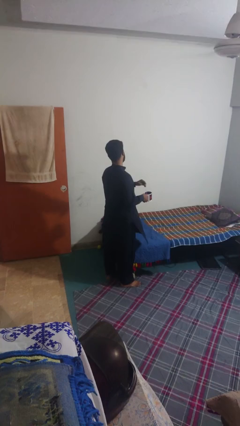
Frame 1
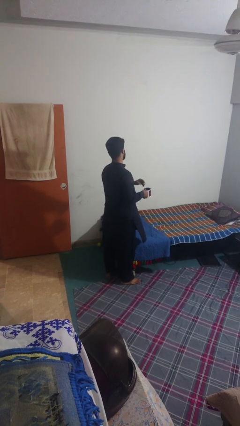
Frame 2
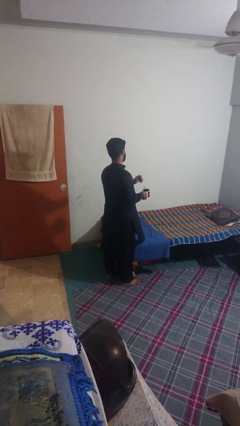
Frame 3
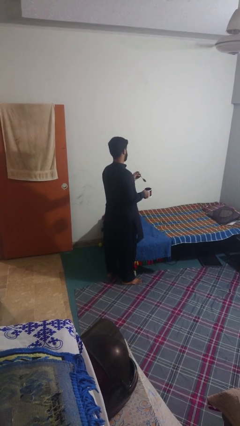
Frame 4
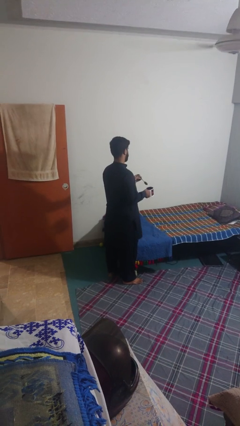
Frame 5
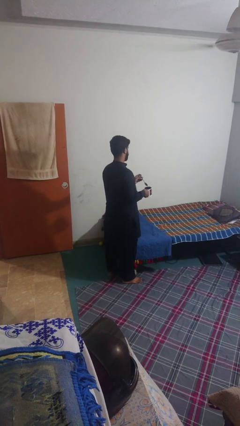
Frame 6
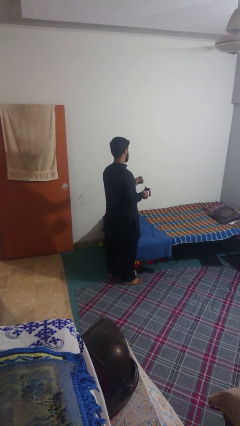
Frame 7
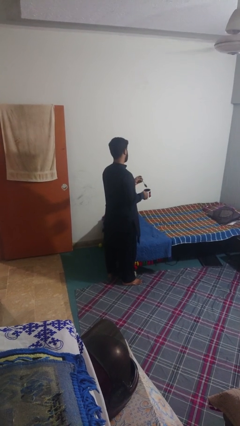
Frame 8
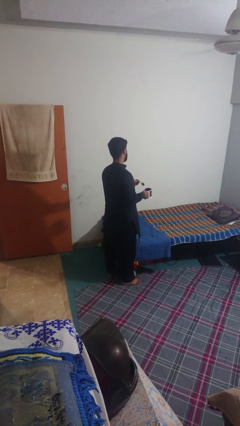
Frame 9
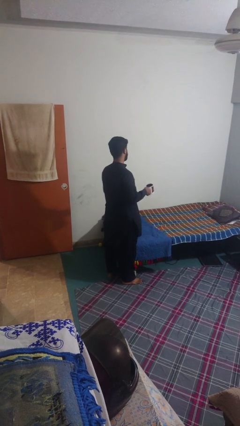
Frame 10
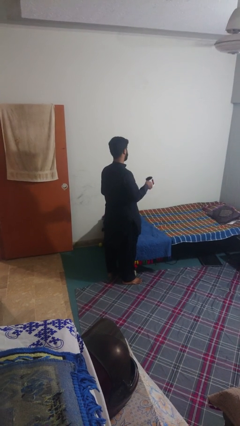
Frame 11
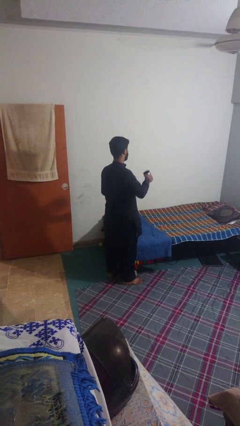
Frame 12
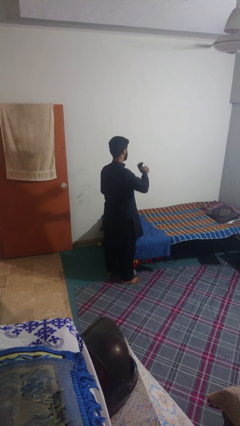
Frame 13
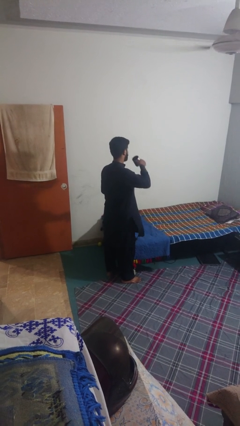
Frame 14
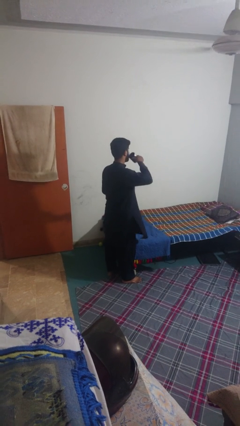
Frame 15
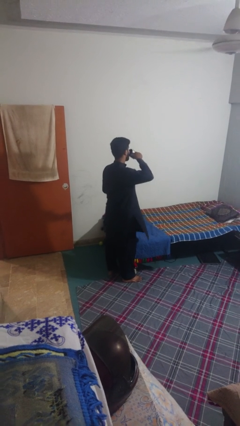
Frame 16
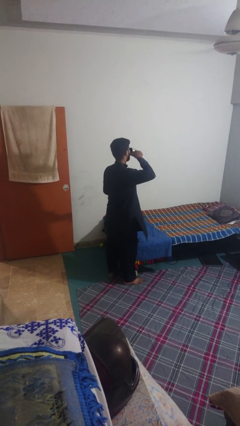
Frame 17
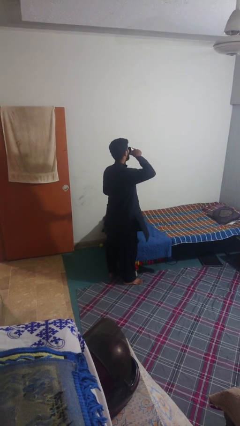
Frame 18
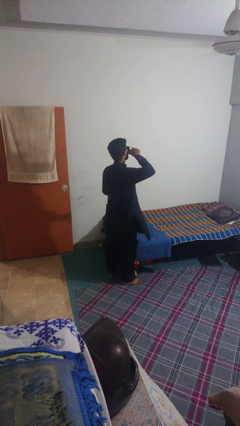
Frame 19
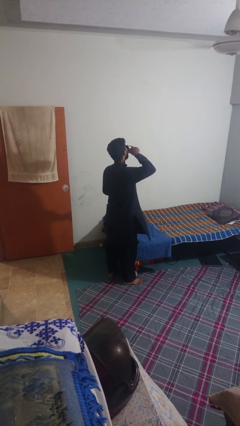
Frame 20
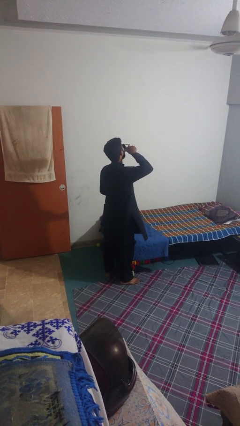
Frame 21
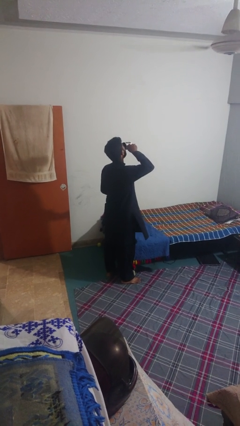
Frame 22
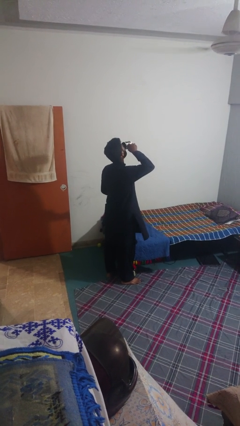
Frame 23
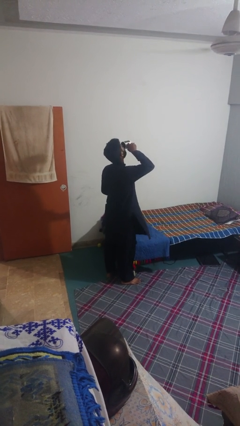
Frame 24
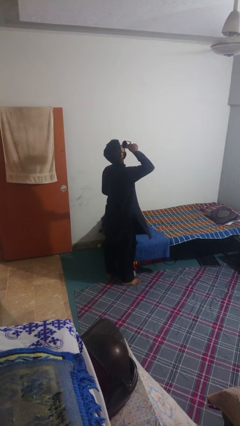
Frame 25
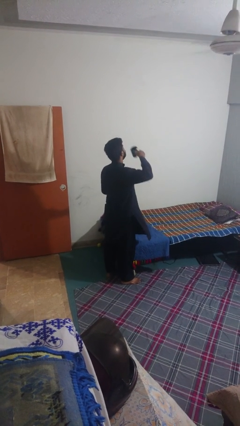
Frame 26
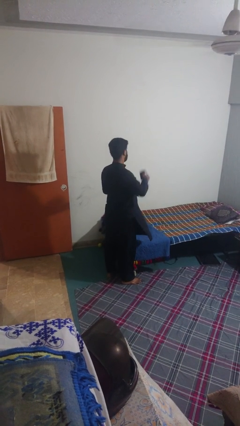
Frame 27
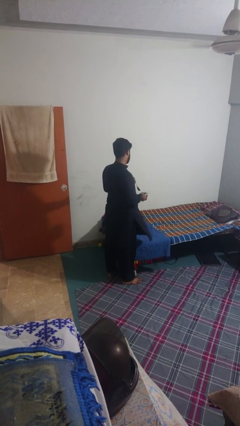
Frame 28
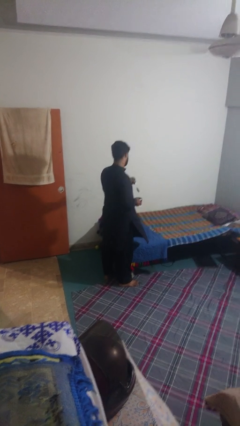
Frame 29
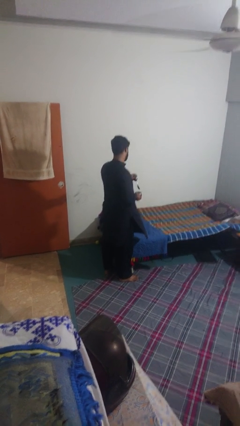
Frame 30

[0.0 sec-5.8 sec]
person drinks from mug

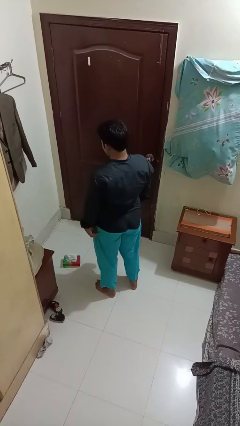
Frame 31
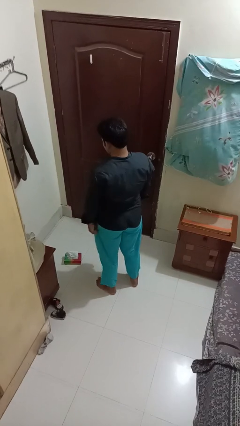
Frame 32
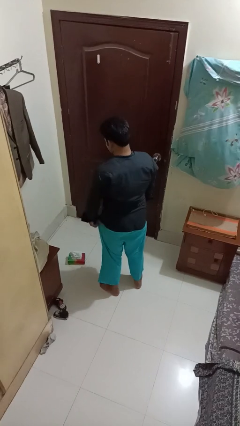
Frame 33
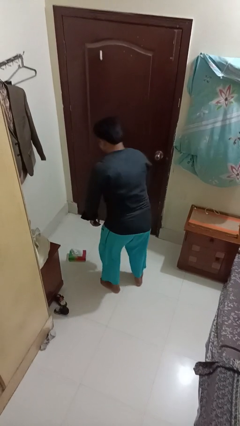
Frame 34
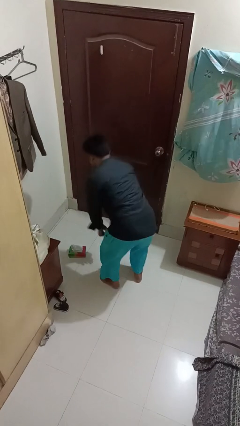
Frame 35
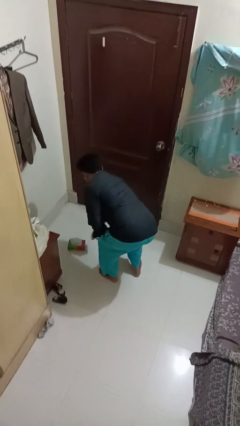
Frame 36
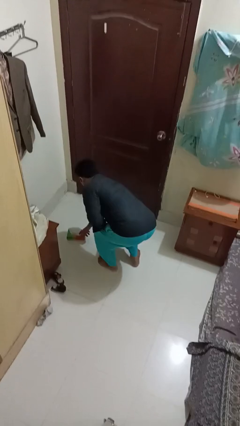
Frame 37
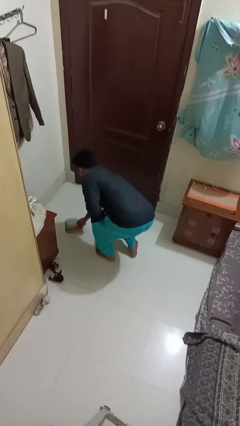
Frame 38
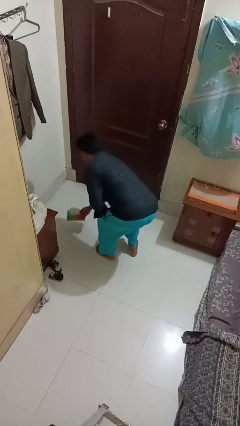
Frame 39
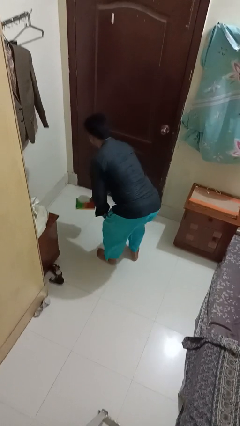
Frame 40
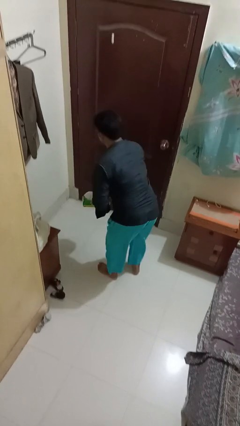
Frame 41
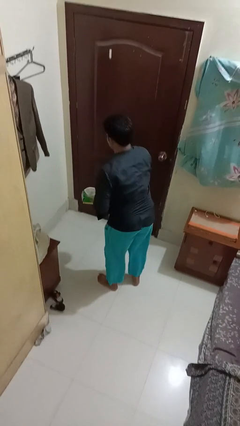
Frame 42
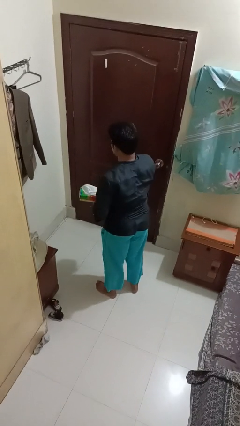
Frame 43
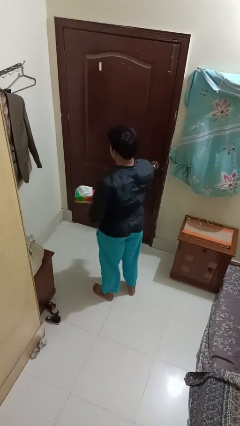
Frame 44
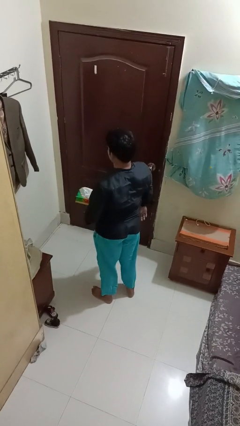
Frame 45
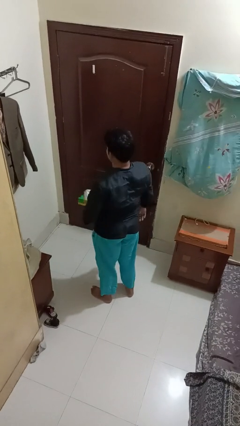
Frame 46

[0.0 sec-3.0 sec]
person picks up object from floor

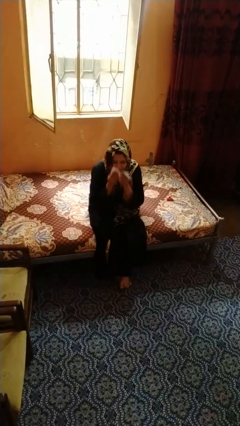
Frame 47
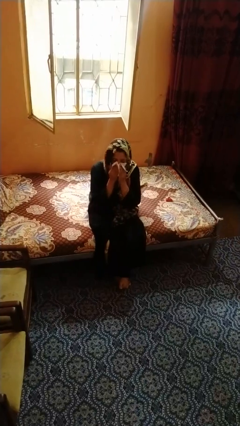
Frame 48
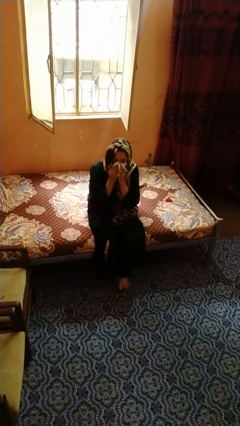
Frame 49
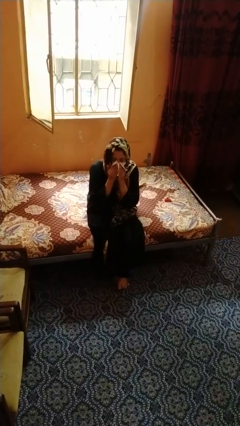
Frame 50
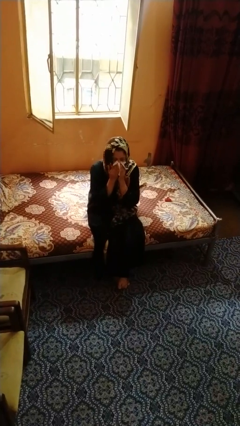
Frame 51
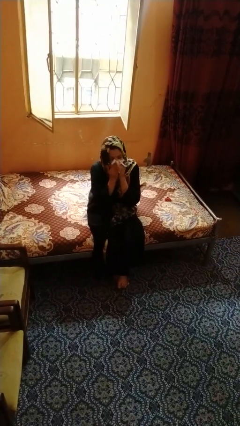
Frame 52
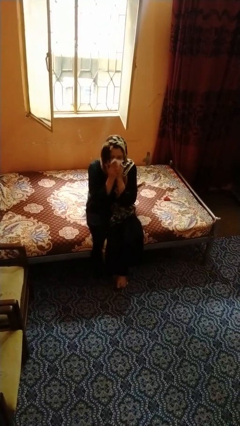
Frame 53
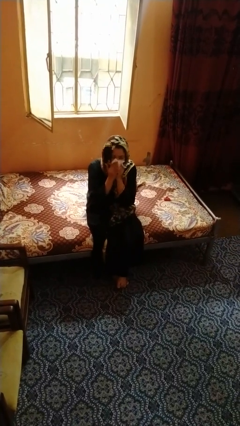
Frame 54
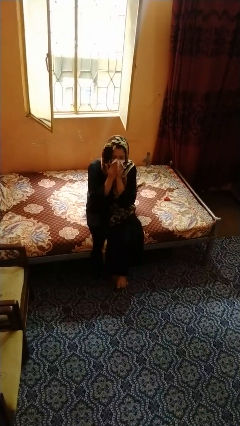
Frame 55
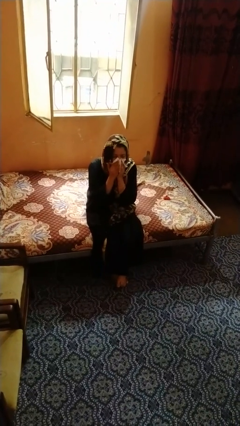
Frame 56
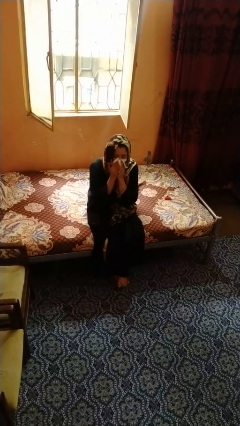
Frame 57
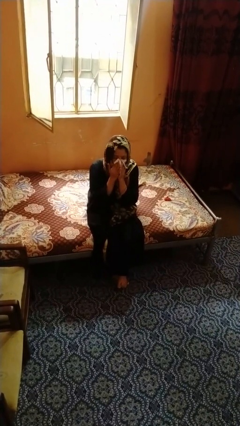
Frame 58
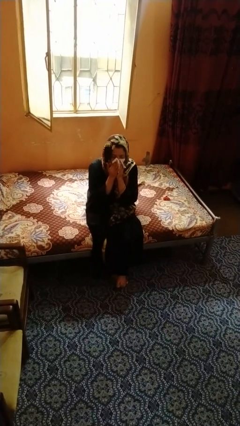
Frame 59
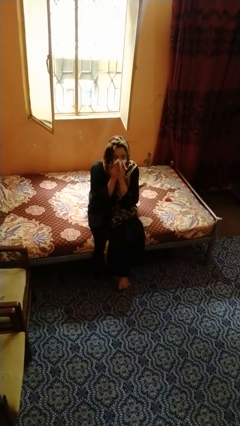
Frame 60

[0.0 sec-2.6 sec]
person blows nose

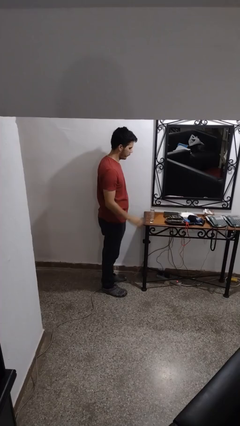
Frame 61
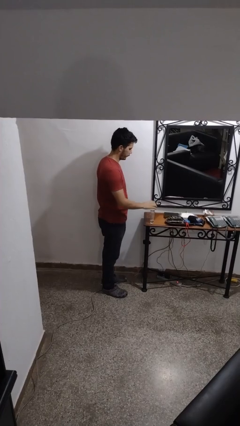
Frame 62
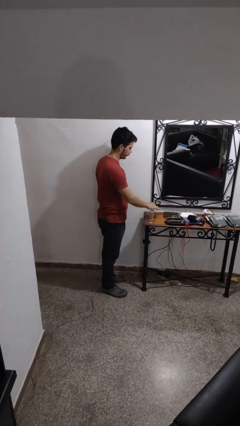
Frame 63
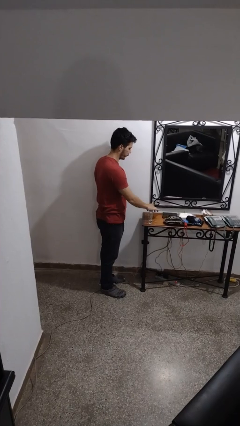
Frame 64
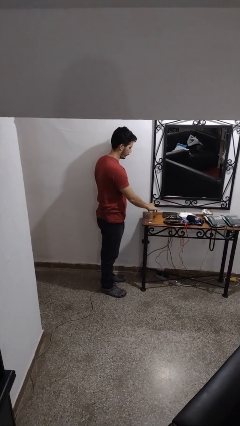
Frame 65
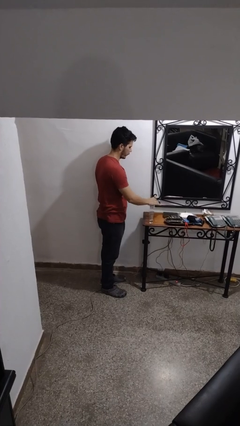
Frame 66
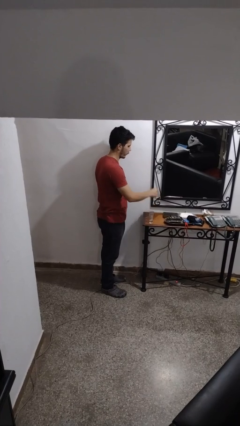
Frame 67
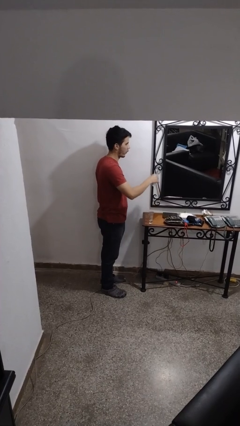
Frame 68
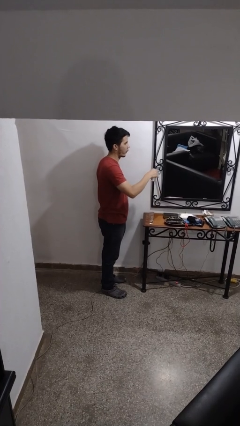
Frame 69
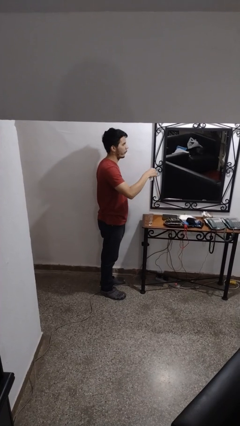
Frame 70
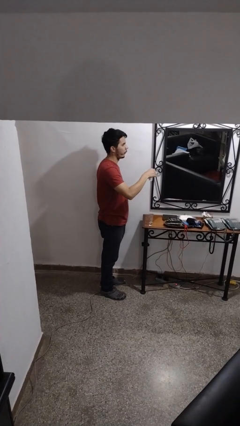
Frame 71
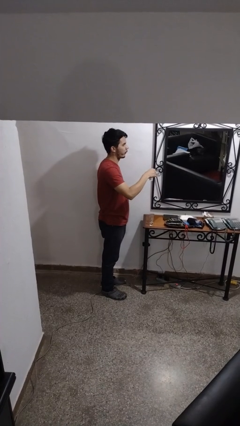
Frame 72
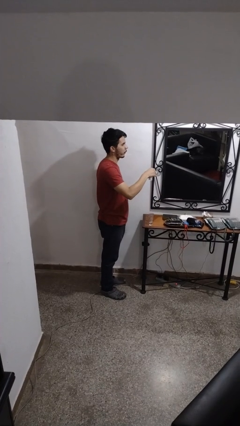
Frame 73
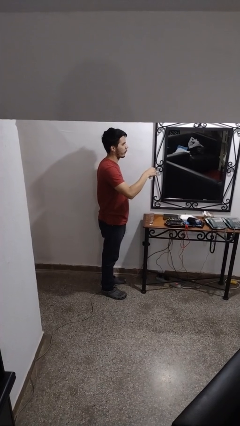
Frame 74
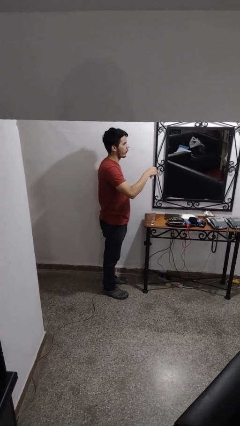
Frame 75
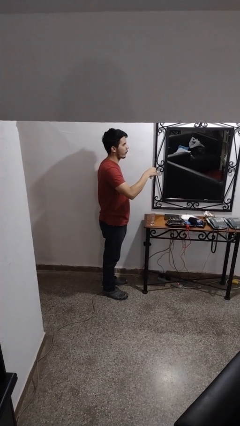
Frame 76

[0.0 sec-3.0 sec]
person picks up object from table

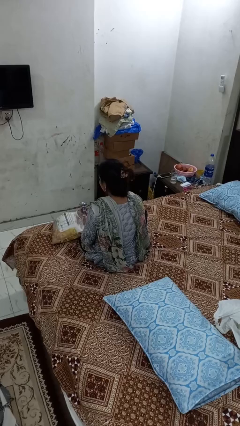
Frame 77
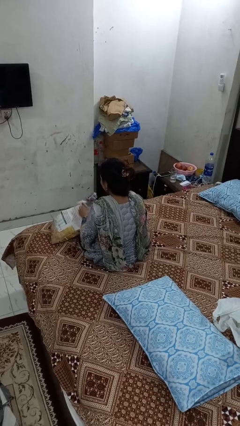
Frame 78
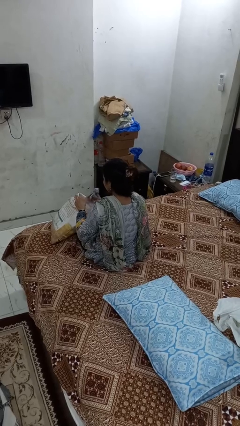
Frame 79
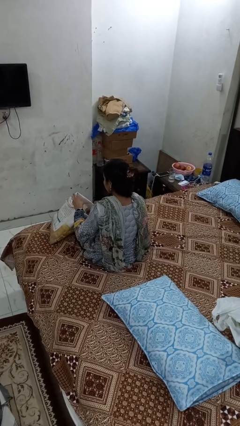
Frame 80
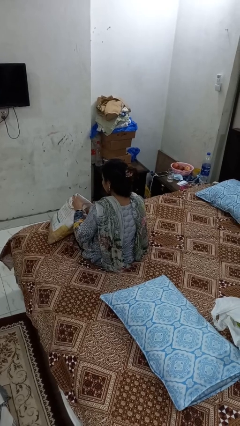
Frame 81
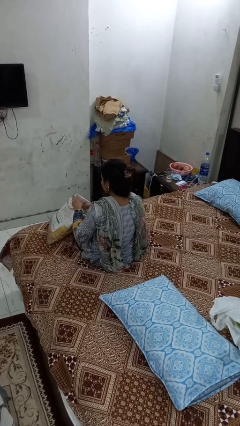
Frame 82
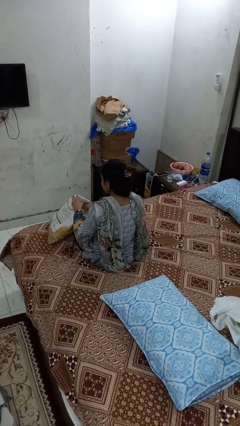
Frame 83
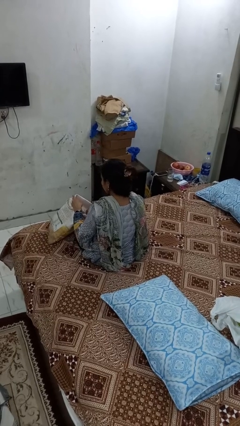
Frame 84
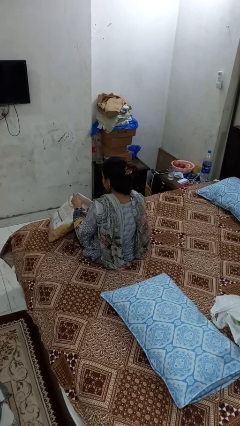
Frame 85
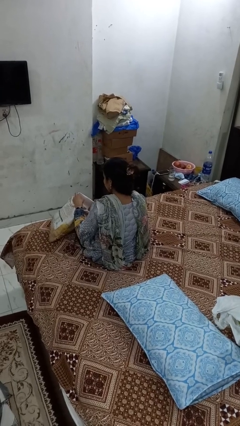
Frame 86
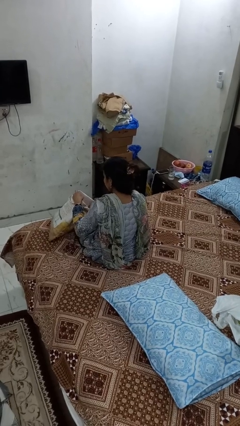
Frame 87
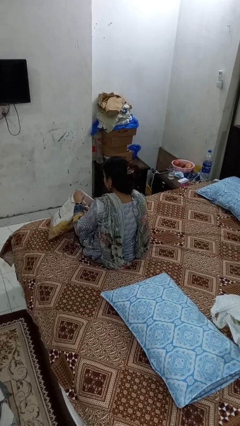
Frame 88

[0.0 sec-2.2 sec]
person puts object into bag

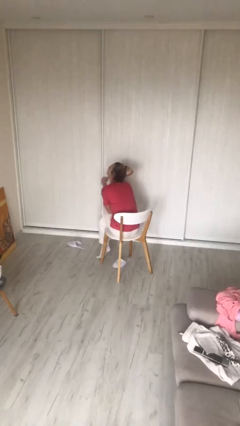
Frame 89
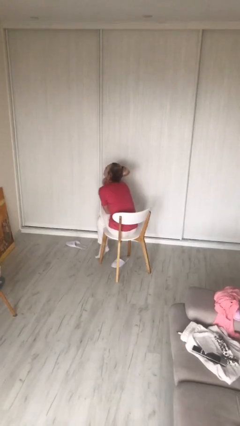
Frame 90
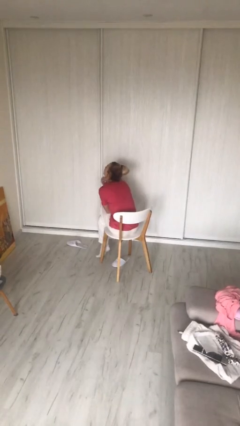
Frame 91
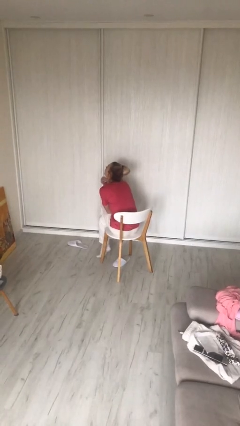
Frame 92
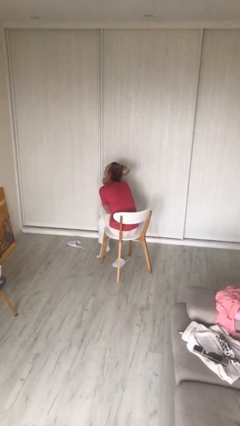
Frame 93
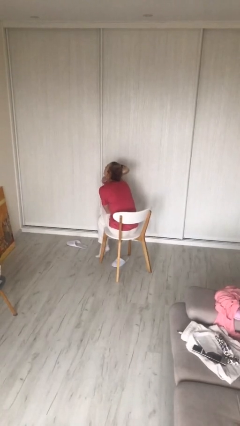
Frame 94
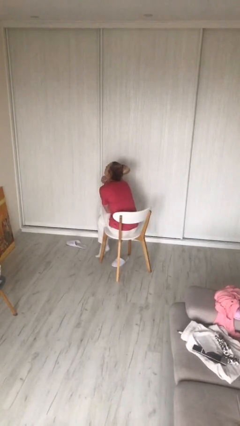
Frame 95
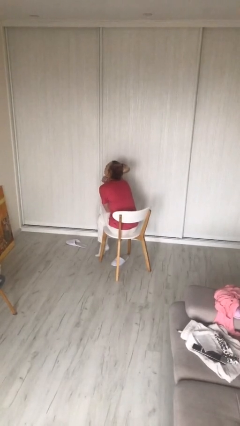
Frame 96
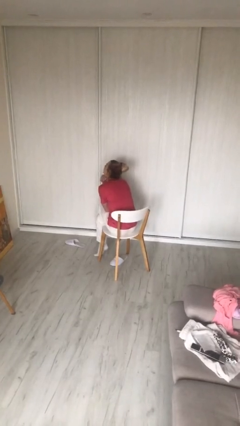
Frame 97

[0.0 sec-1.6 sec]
person strokes chin
